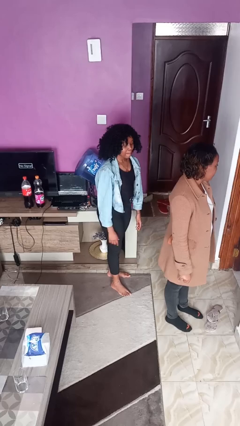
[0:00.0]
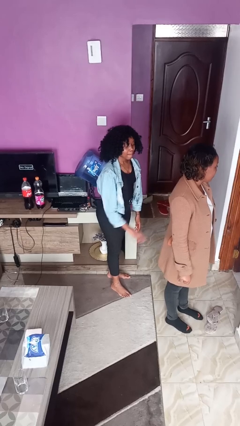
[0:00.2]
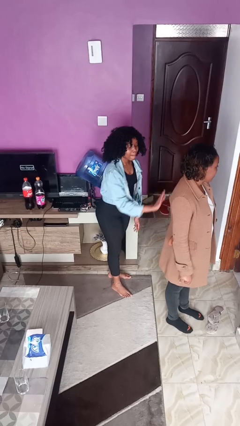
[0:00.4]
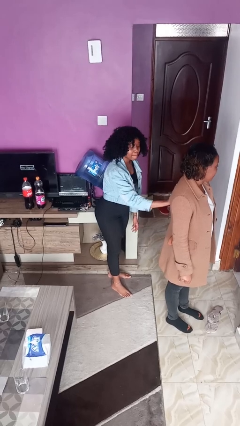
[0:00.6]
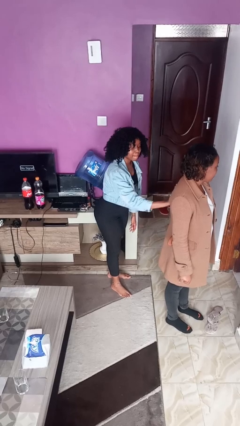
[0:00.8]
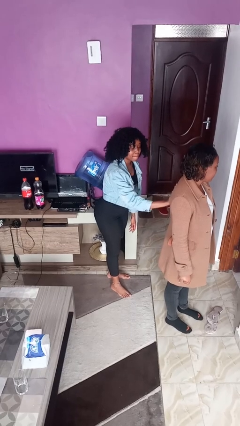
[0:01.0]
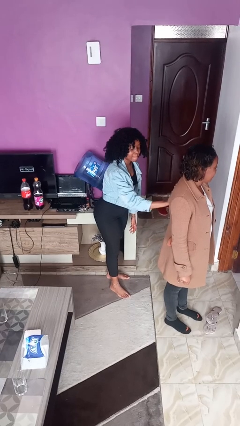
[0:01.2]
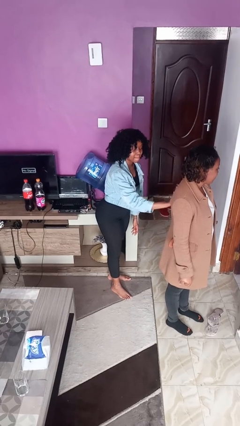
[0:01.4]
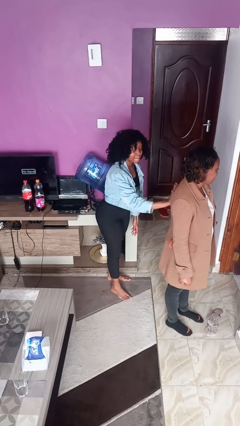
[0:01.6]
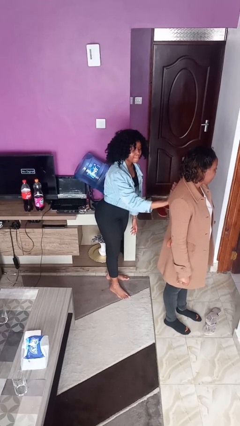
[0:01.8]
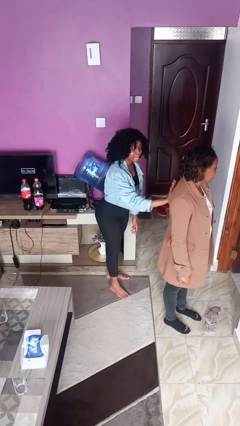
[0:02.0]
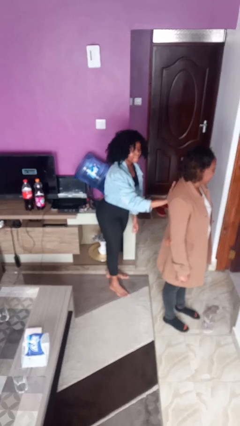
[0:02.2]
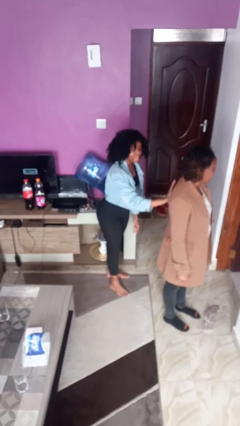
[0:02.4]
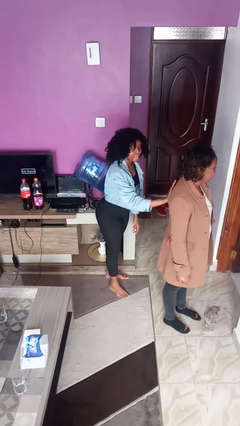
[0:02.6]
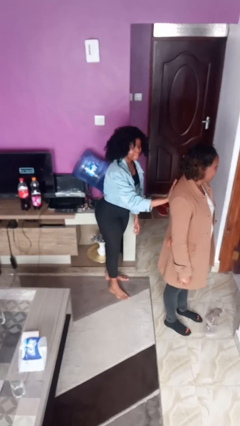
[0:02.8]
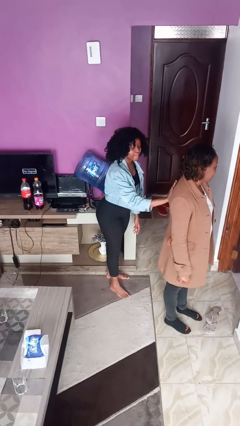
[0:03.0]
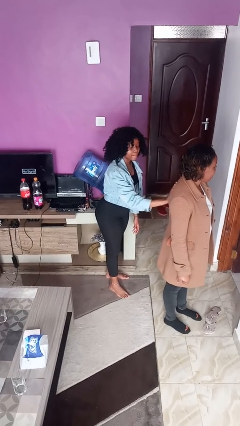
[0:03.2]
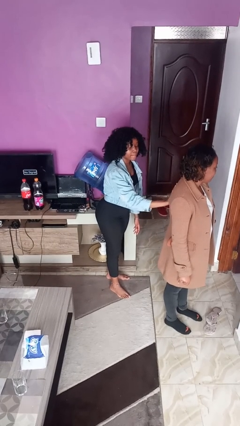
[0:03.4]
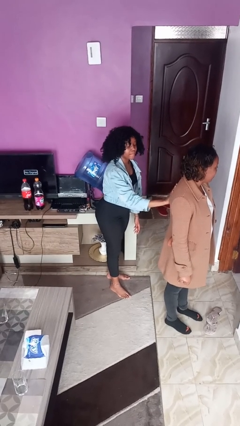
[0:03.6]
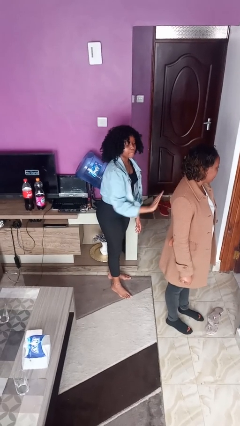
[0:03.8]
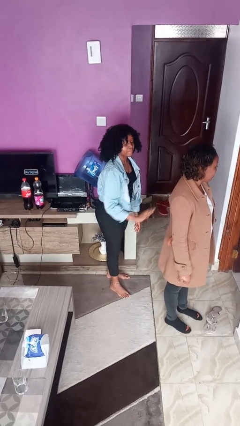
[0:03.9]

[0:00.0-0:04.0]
person touches back of person

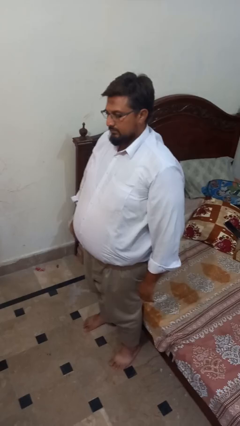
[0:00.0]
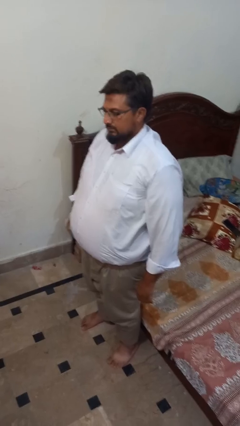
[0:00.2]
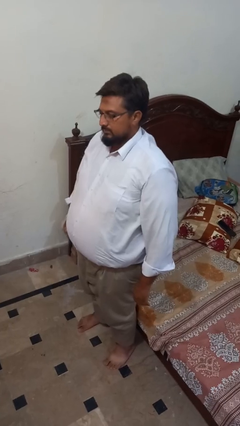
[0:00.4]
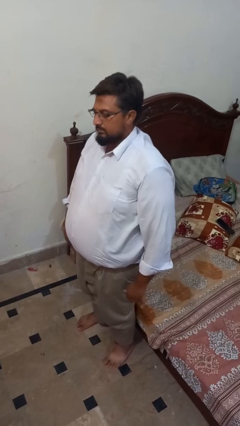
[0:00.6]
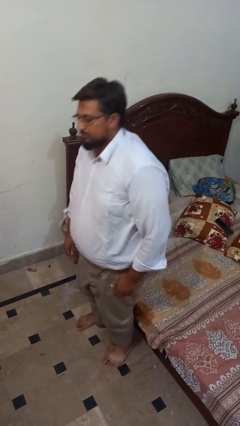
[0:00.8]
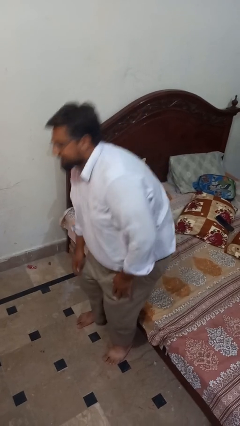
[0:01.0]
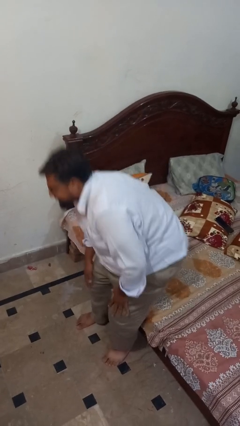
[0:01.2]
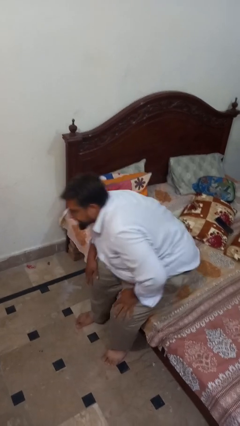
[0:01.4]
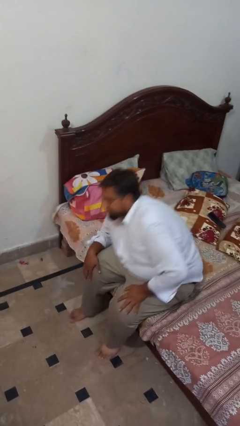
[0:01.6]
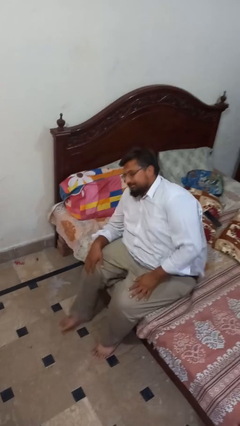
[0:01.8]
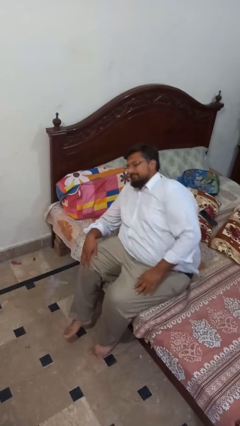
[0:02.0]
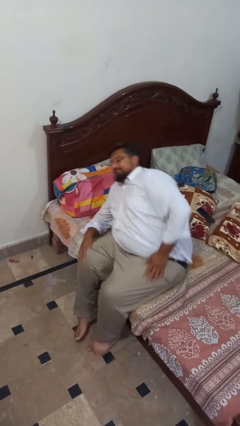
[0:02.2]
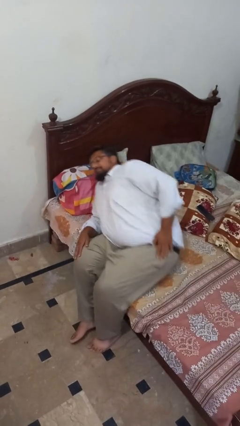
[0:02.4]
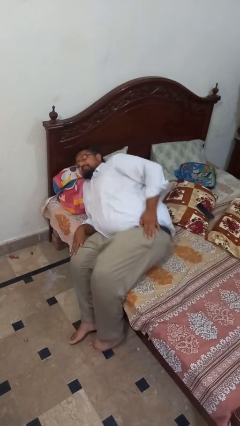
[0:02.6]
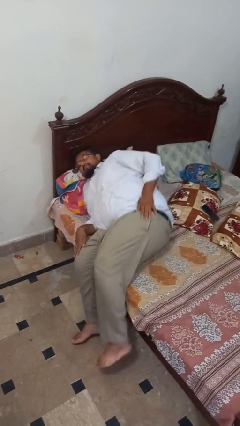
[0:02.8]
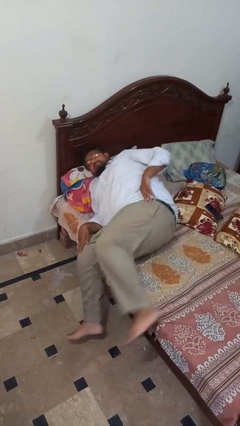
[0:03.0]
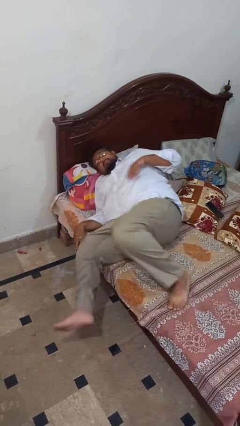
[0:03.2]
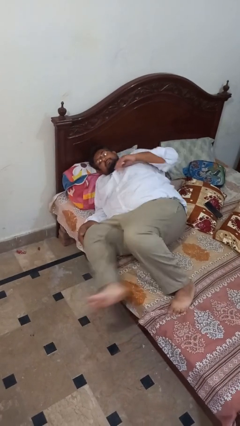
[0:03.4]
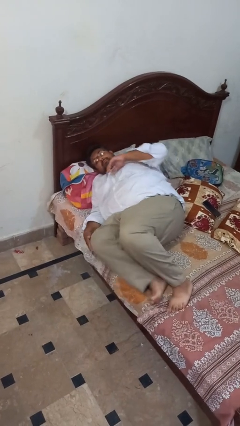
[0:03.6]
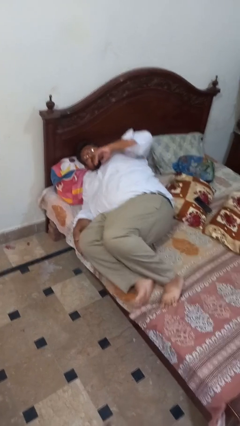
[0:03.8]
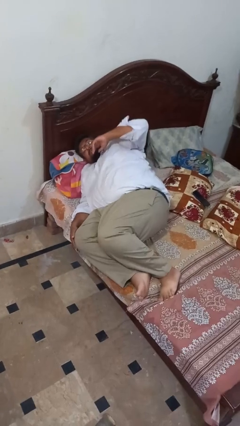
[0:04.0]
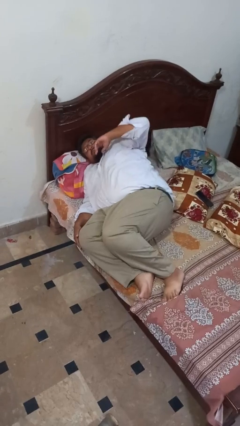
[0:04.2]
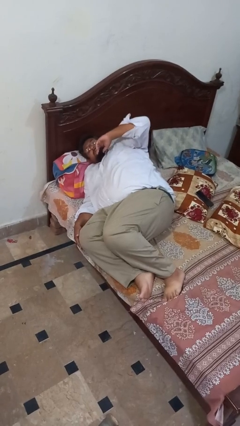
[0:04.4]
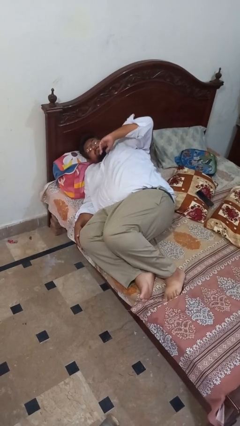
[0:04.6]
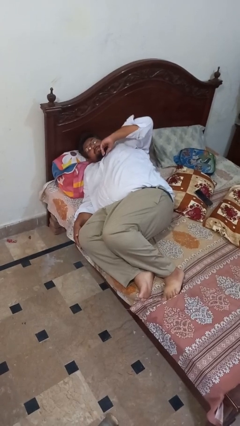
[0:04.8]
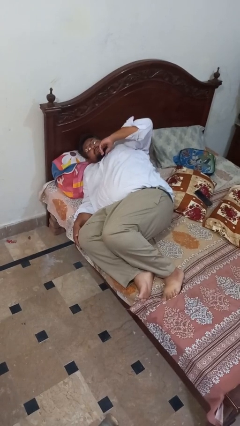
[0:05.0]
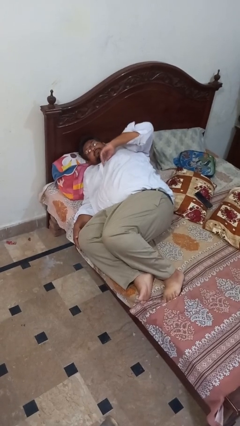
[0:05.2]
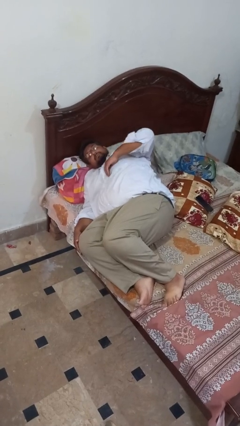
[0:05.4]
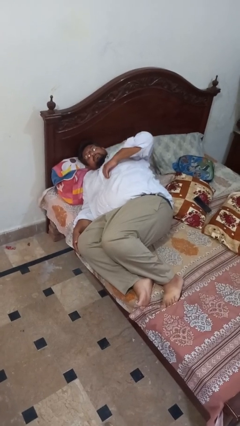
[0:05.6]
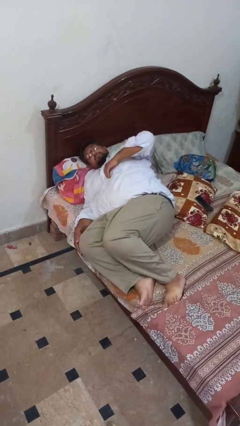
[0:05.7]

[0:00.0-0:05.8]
person lies down on bed

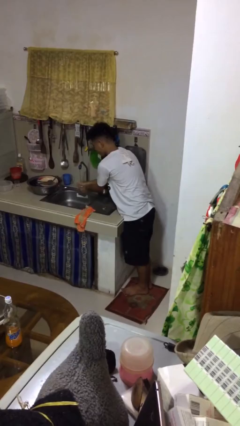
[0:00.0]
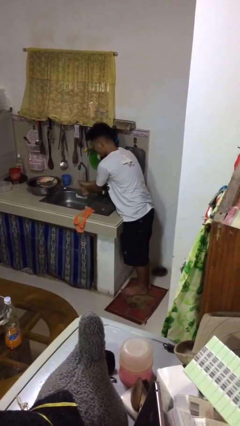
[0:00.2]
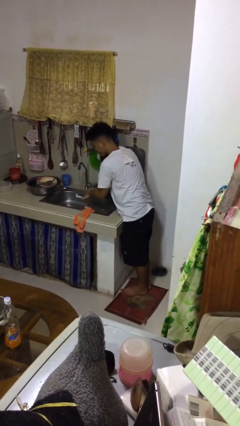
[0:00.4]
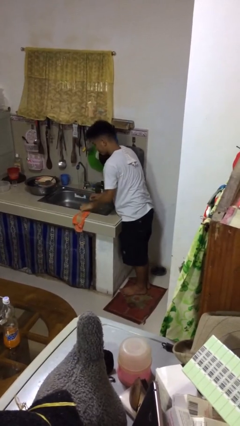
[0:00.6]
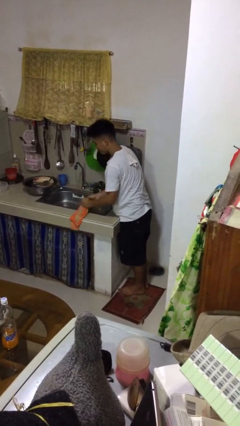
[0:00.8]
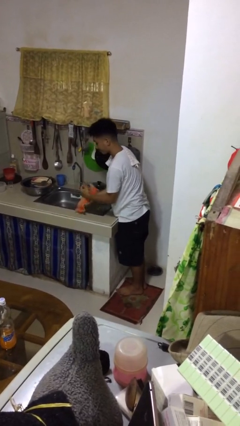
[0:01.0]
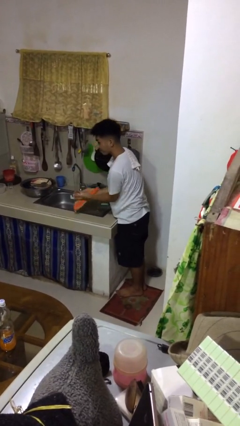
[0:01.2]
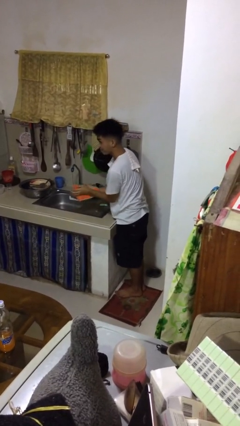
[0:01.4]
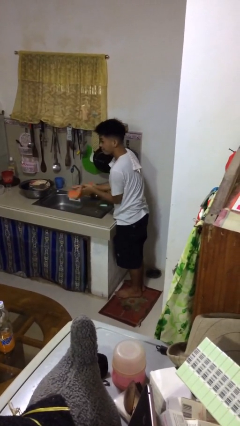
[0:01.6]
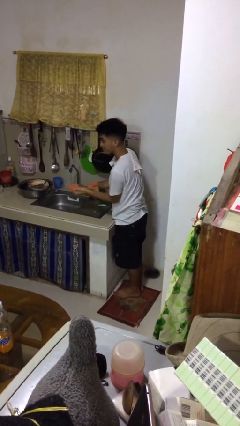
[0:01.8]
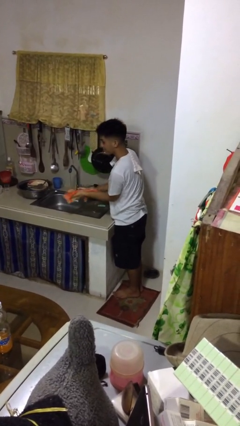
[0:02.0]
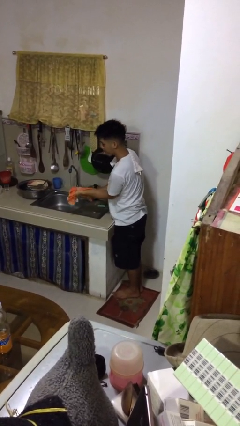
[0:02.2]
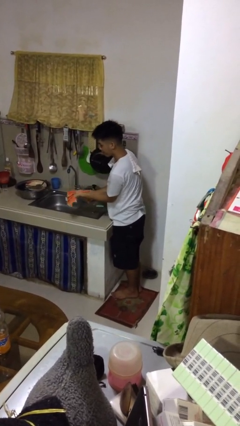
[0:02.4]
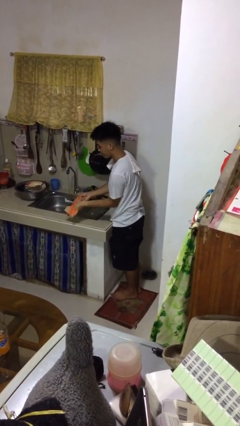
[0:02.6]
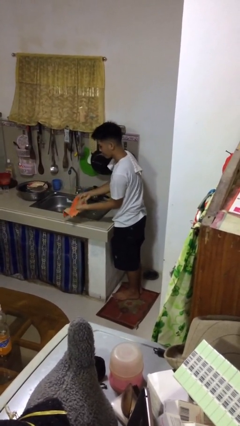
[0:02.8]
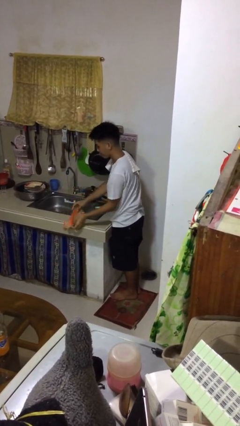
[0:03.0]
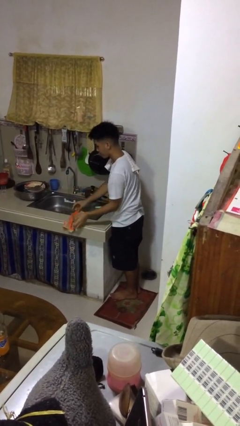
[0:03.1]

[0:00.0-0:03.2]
person dries hands with towel

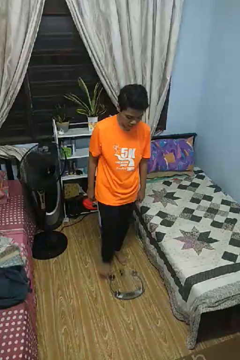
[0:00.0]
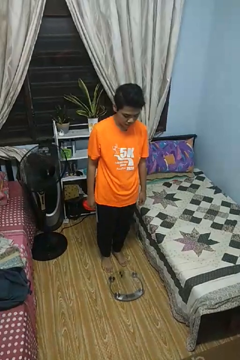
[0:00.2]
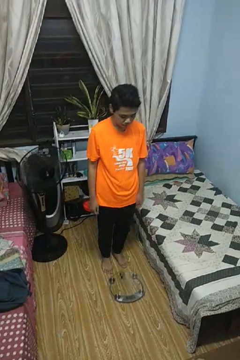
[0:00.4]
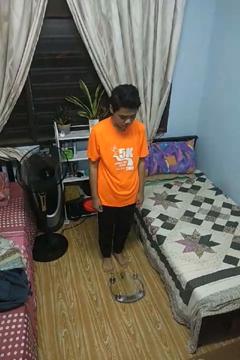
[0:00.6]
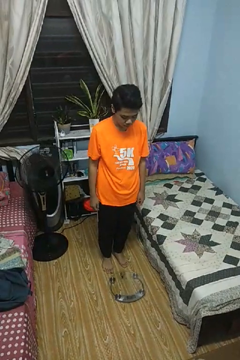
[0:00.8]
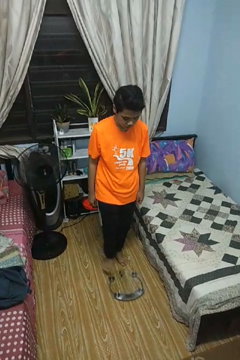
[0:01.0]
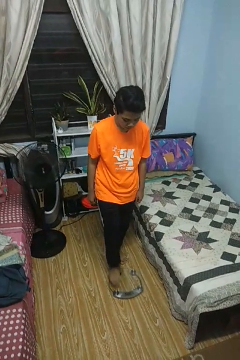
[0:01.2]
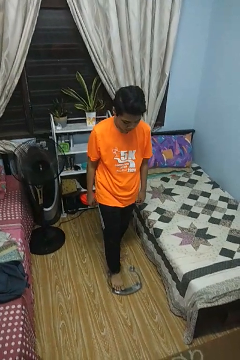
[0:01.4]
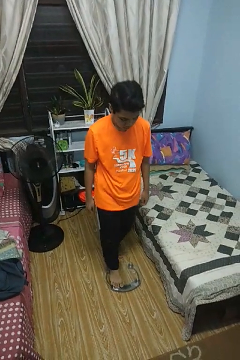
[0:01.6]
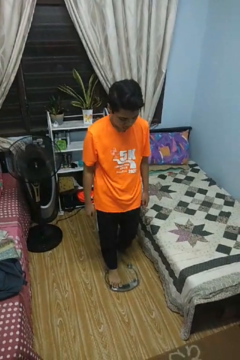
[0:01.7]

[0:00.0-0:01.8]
person uses bodyweight scale

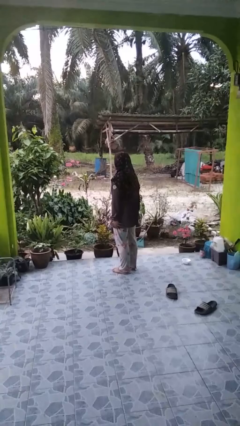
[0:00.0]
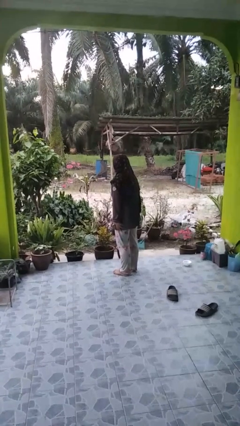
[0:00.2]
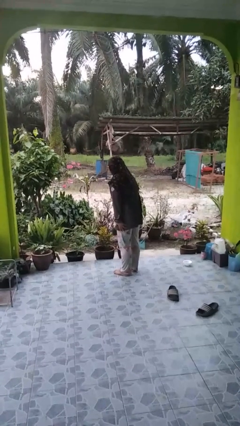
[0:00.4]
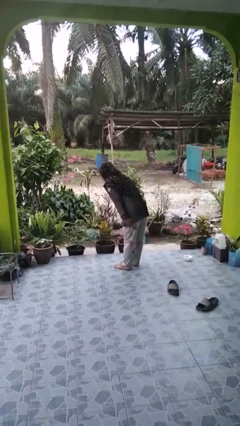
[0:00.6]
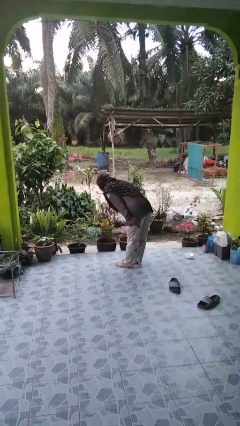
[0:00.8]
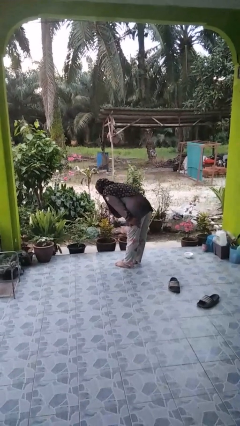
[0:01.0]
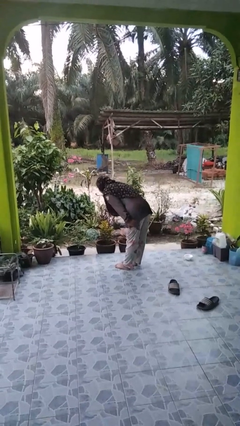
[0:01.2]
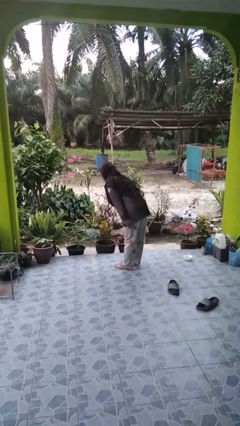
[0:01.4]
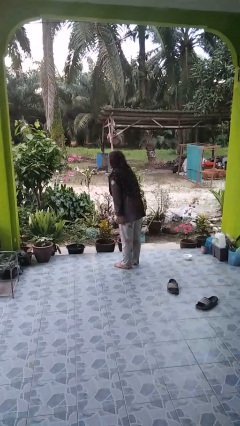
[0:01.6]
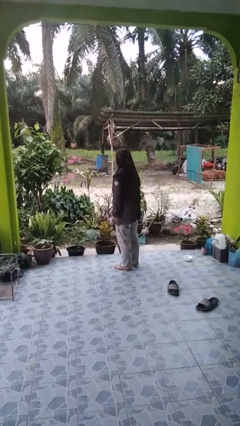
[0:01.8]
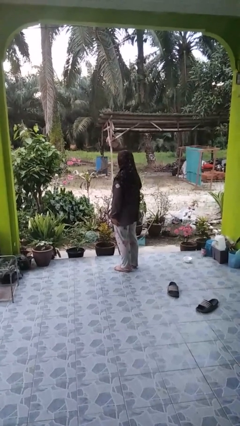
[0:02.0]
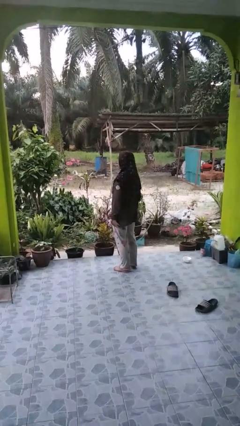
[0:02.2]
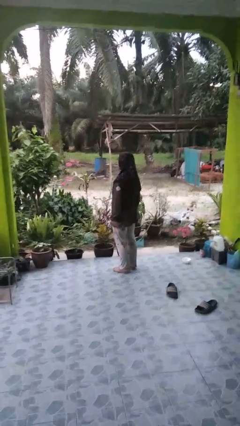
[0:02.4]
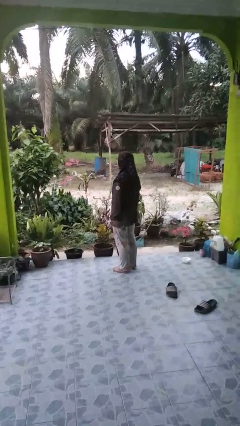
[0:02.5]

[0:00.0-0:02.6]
person bows

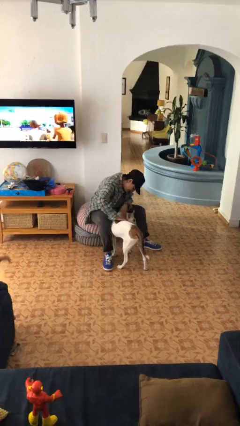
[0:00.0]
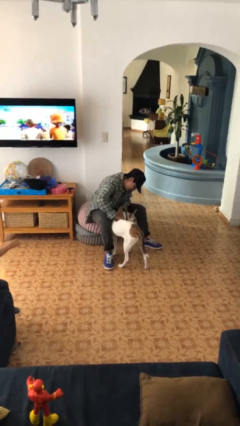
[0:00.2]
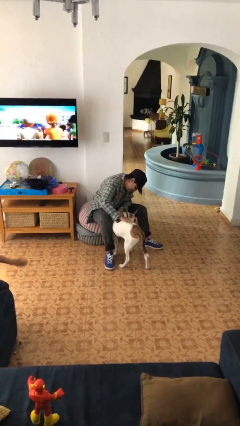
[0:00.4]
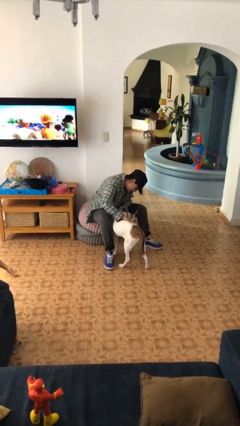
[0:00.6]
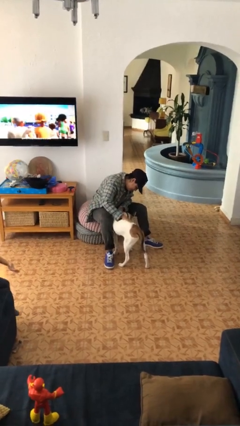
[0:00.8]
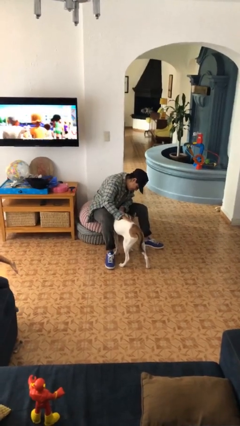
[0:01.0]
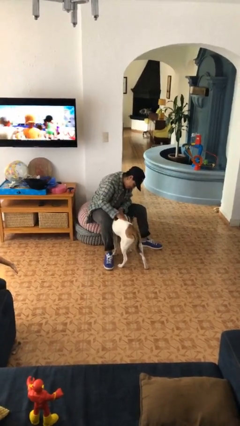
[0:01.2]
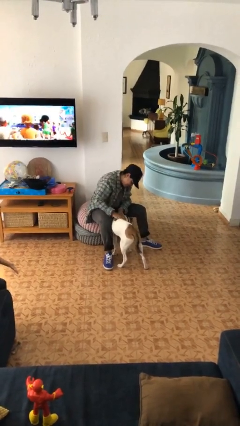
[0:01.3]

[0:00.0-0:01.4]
person pets dog